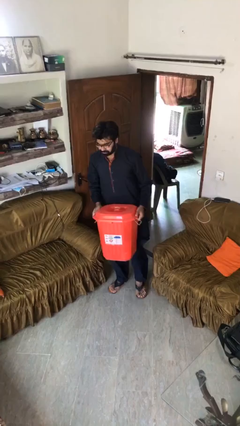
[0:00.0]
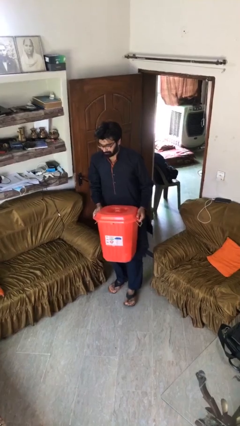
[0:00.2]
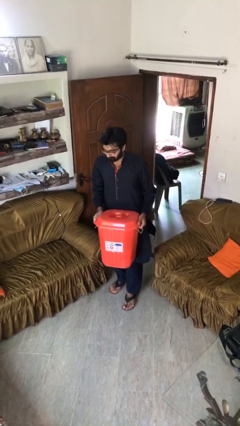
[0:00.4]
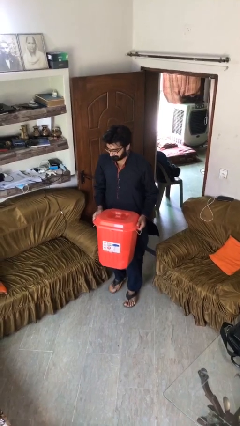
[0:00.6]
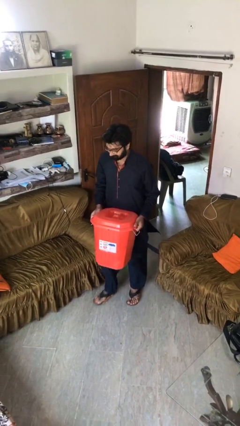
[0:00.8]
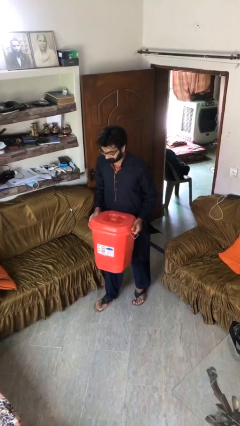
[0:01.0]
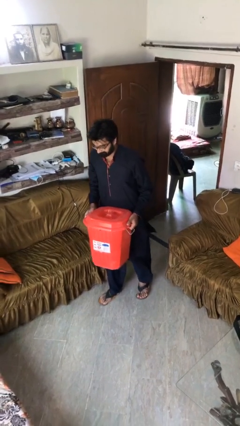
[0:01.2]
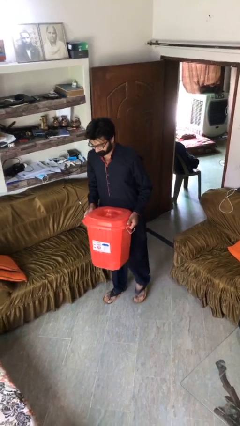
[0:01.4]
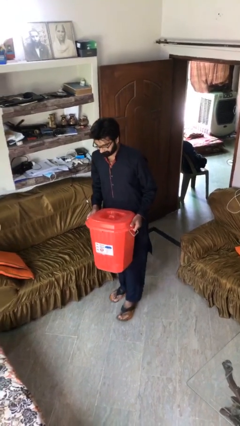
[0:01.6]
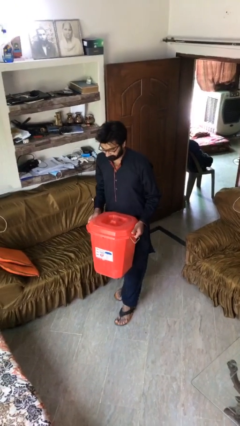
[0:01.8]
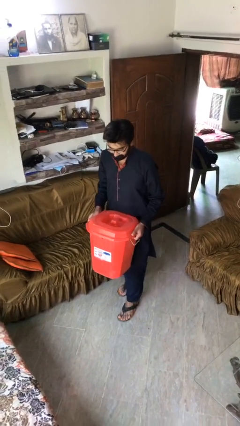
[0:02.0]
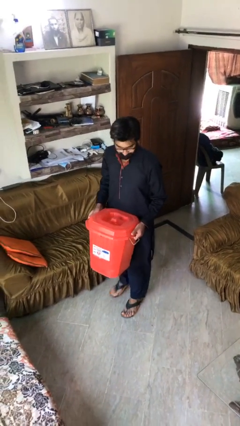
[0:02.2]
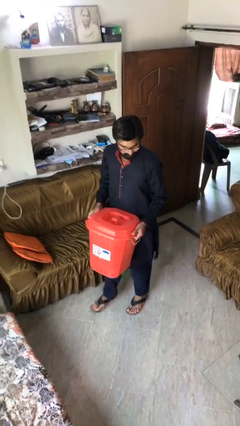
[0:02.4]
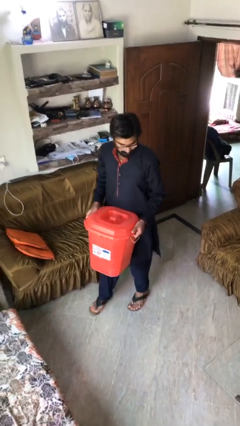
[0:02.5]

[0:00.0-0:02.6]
person carries heavy object

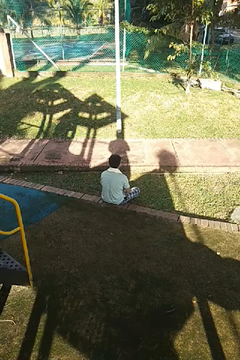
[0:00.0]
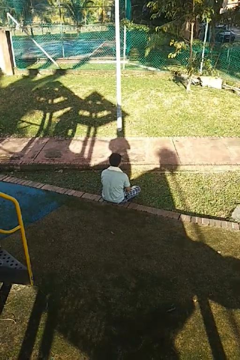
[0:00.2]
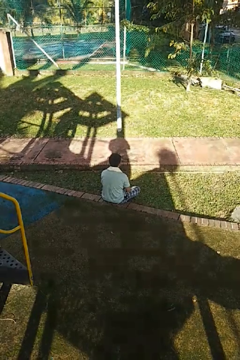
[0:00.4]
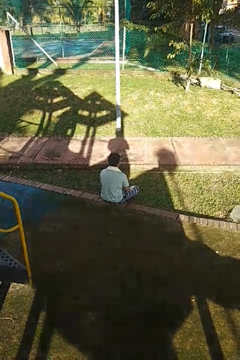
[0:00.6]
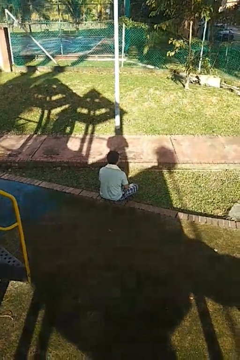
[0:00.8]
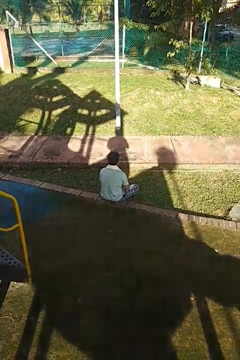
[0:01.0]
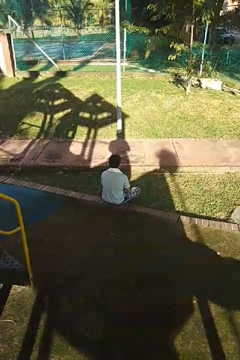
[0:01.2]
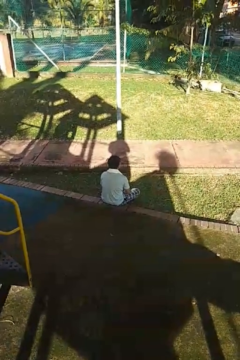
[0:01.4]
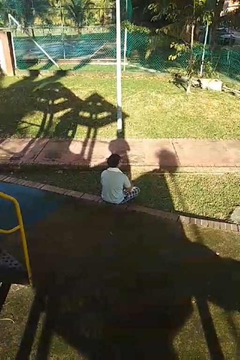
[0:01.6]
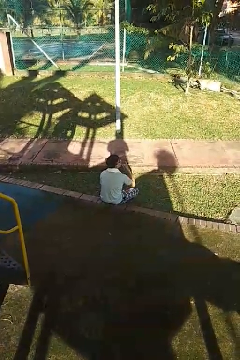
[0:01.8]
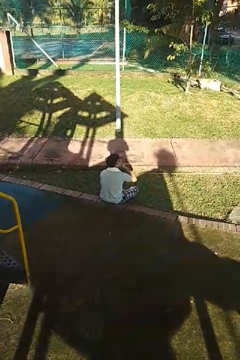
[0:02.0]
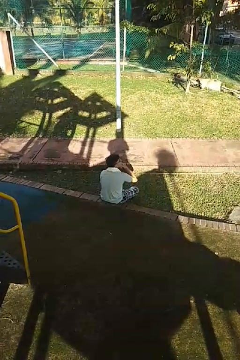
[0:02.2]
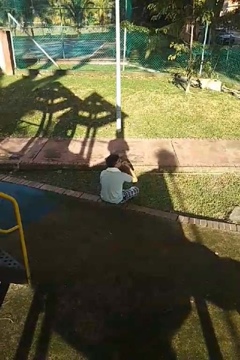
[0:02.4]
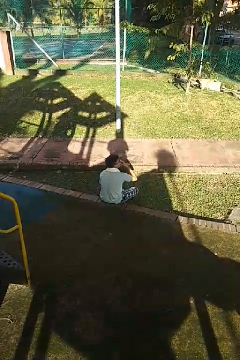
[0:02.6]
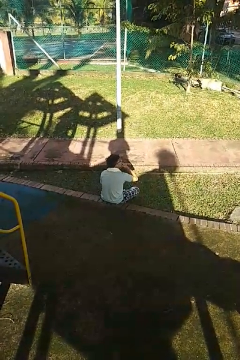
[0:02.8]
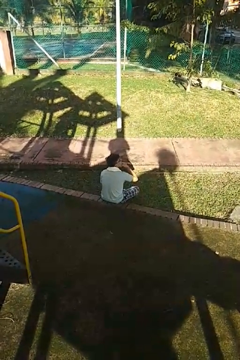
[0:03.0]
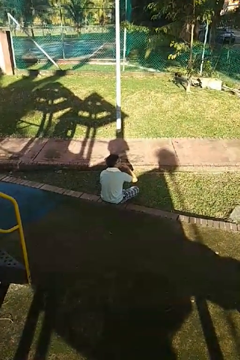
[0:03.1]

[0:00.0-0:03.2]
person strokes chin

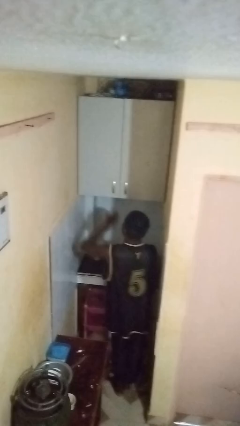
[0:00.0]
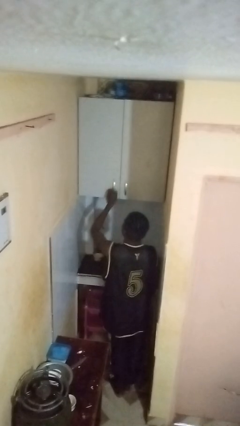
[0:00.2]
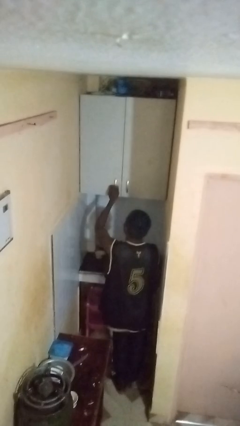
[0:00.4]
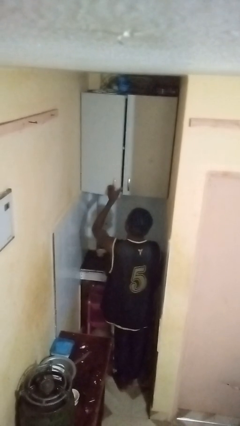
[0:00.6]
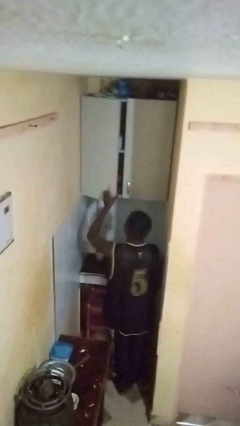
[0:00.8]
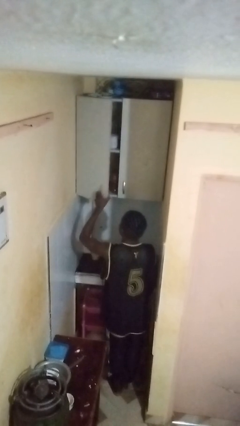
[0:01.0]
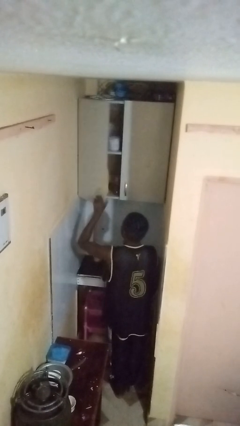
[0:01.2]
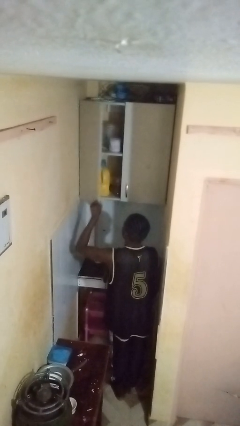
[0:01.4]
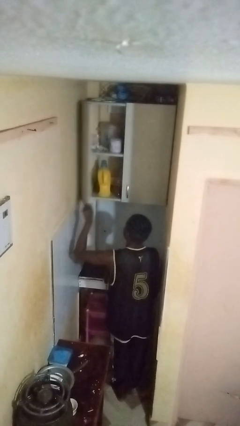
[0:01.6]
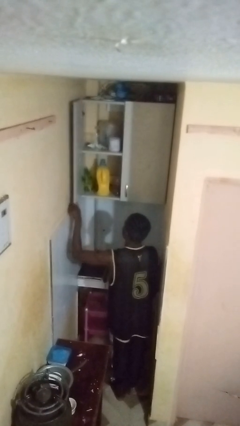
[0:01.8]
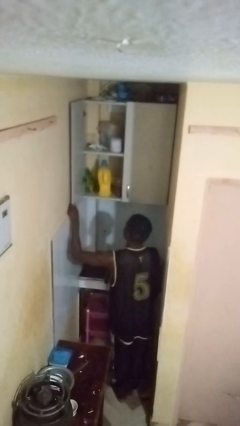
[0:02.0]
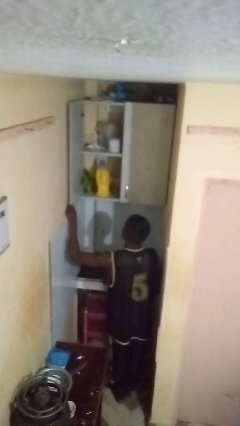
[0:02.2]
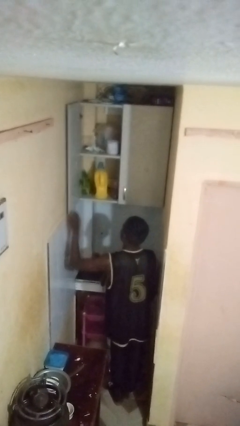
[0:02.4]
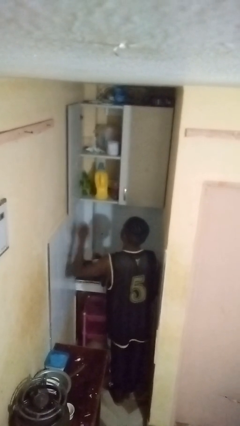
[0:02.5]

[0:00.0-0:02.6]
person opens cabinet

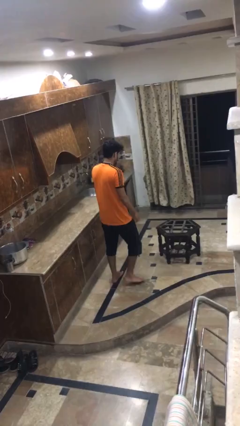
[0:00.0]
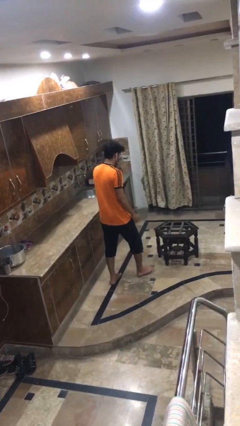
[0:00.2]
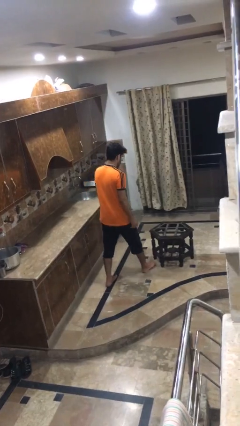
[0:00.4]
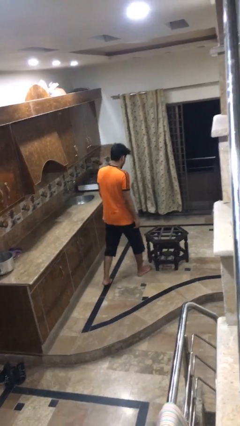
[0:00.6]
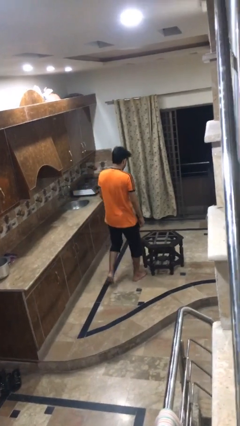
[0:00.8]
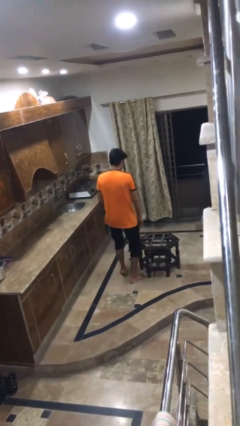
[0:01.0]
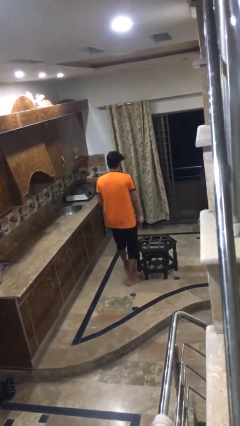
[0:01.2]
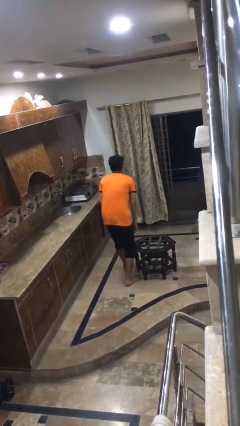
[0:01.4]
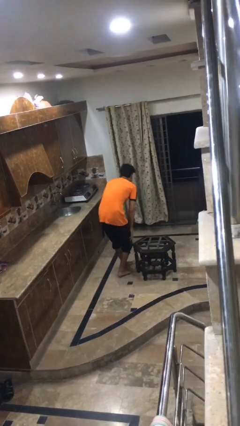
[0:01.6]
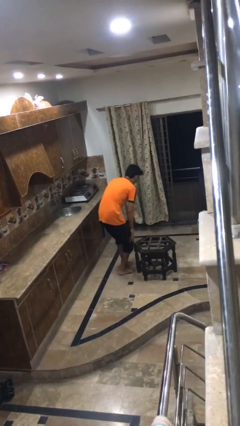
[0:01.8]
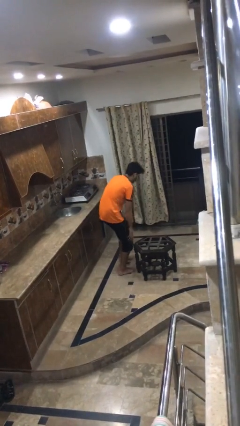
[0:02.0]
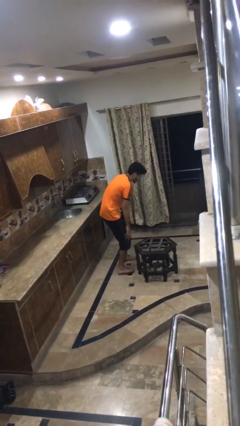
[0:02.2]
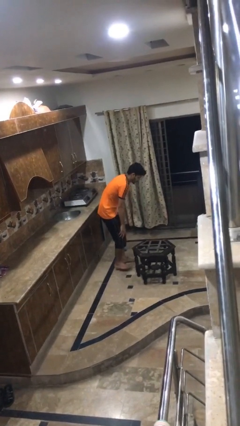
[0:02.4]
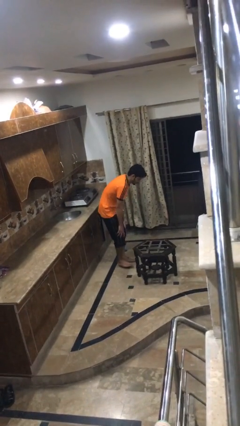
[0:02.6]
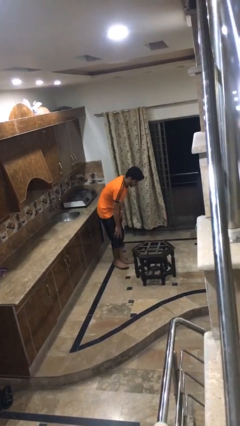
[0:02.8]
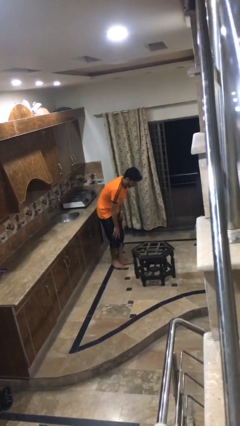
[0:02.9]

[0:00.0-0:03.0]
person bumps into table

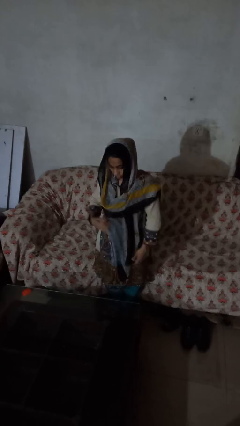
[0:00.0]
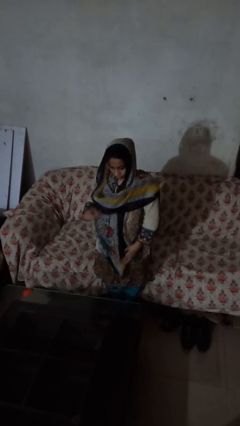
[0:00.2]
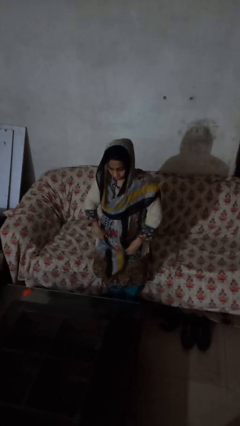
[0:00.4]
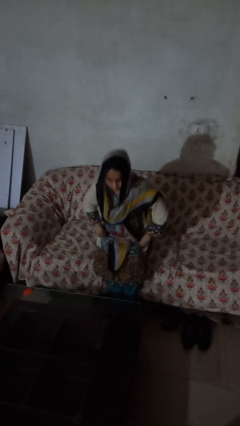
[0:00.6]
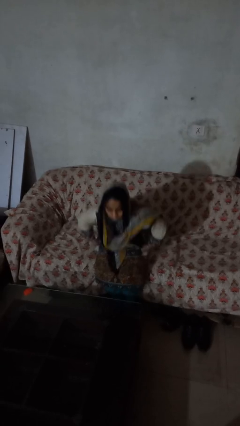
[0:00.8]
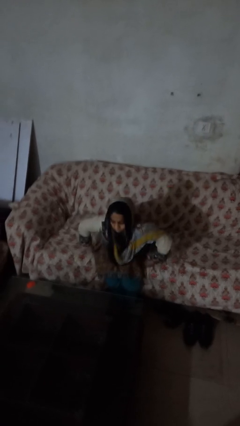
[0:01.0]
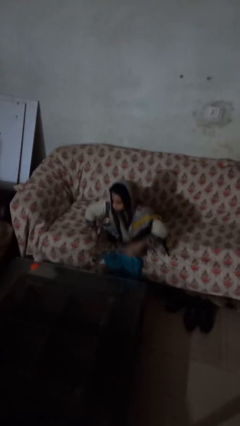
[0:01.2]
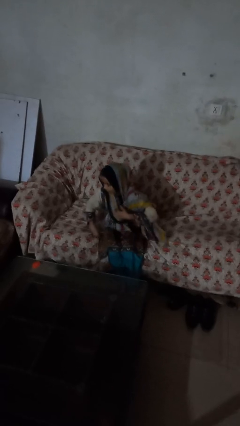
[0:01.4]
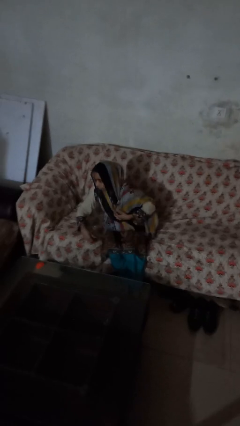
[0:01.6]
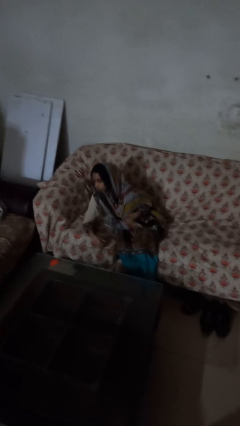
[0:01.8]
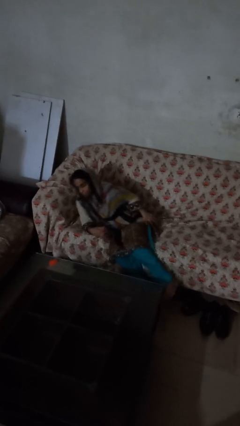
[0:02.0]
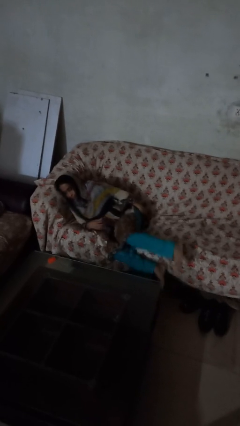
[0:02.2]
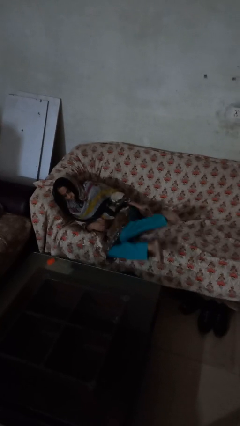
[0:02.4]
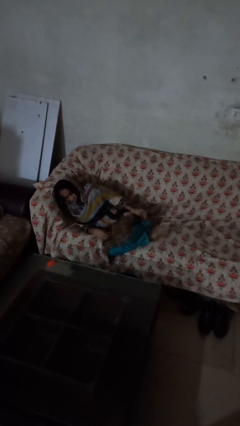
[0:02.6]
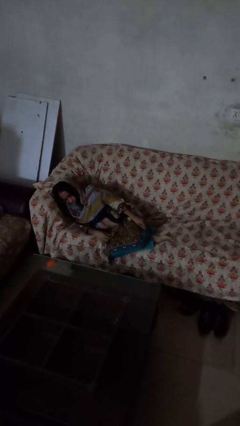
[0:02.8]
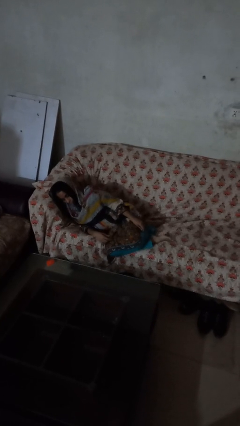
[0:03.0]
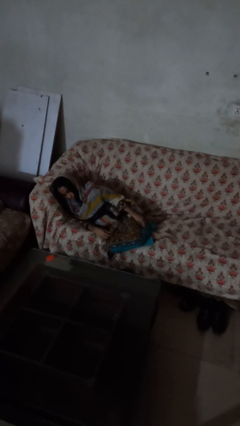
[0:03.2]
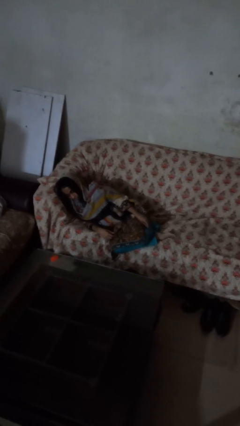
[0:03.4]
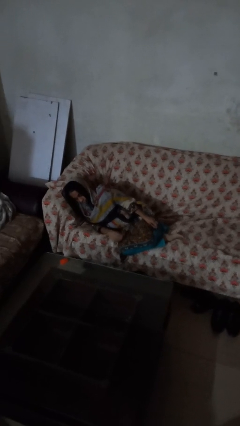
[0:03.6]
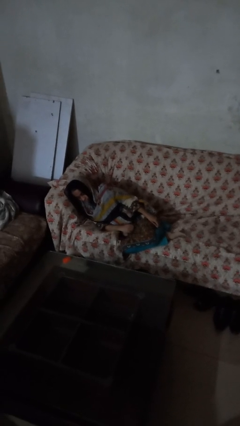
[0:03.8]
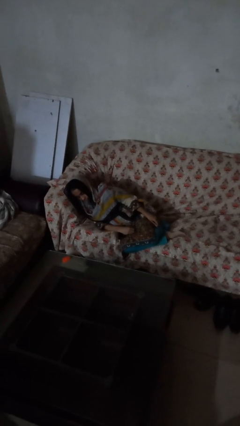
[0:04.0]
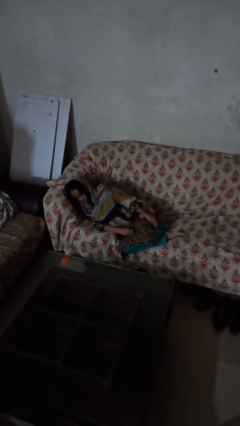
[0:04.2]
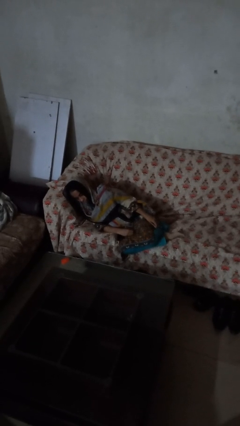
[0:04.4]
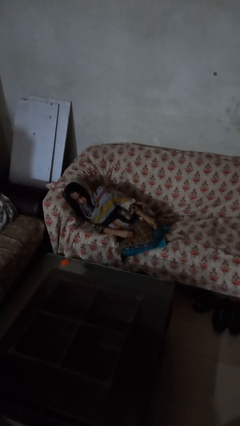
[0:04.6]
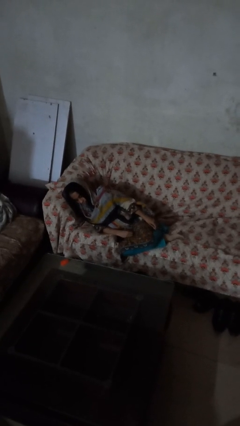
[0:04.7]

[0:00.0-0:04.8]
person lies down on couch

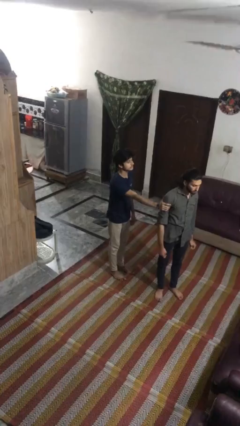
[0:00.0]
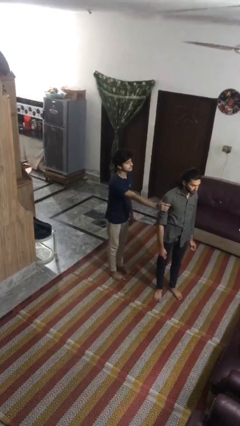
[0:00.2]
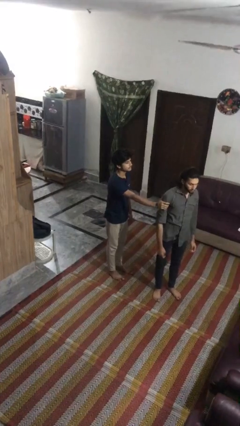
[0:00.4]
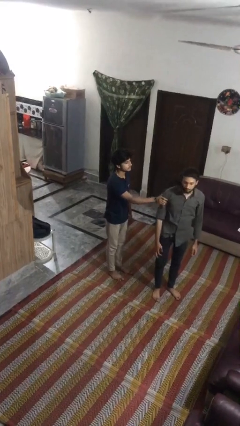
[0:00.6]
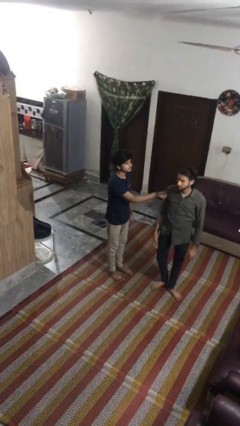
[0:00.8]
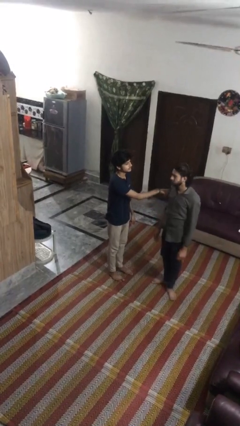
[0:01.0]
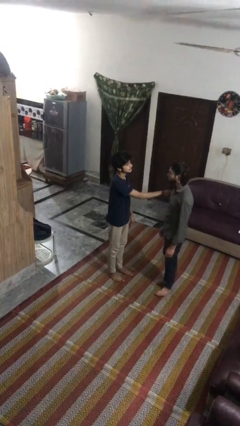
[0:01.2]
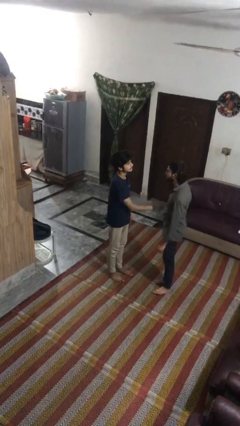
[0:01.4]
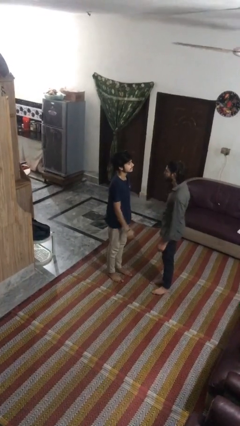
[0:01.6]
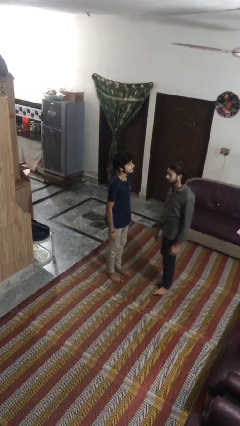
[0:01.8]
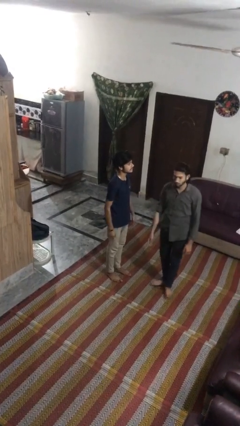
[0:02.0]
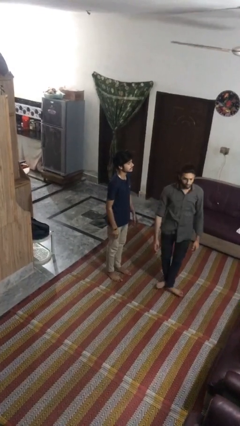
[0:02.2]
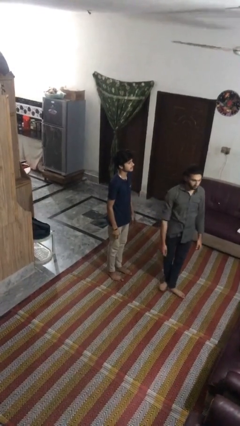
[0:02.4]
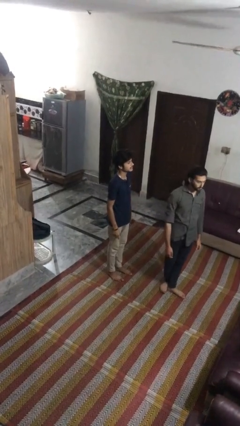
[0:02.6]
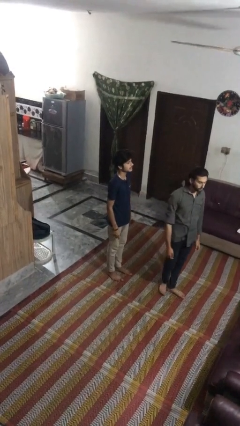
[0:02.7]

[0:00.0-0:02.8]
person spins person around
